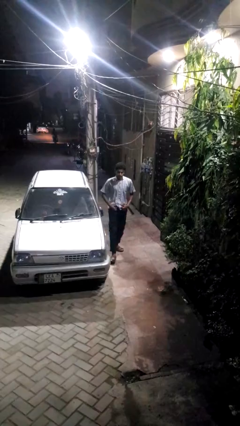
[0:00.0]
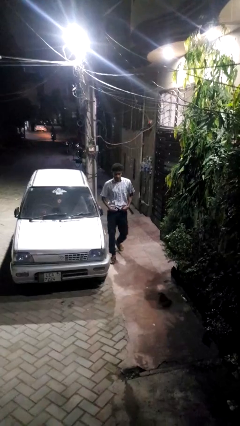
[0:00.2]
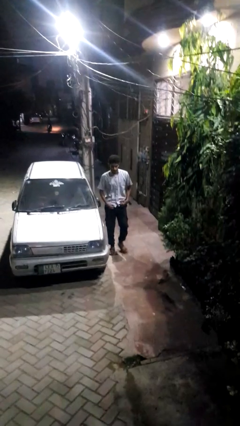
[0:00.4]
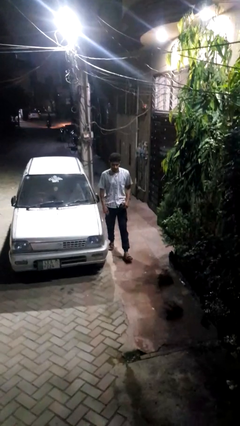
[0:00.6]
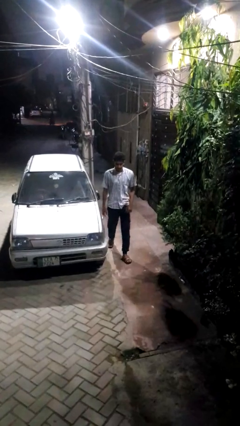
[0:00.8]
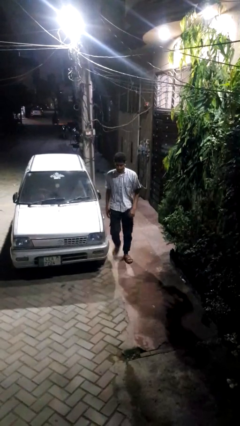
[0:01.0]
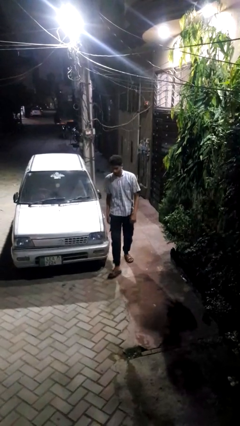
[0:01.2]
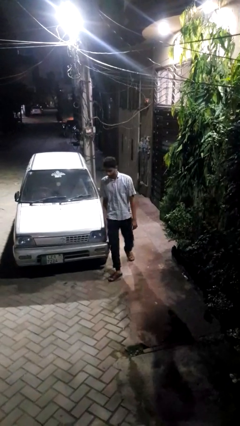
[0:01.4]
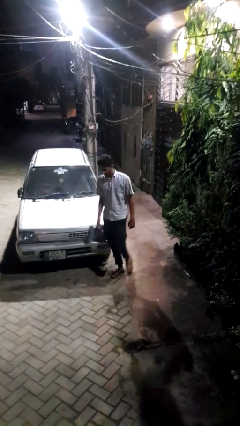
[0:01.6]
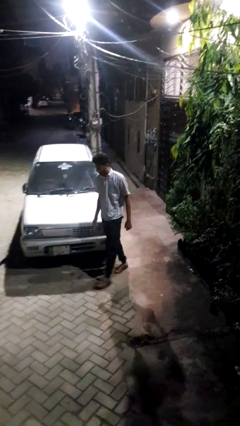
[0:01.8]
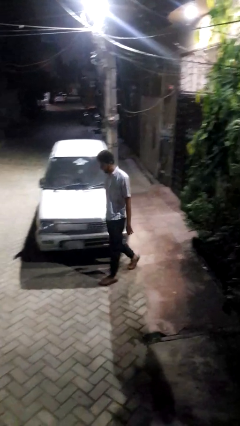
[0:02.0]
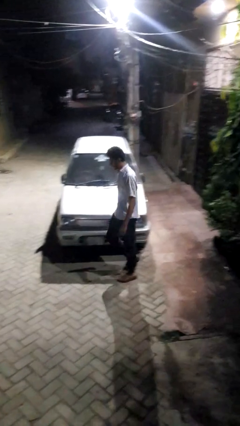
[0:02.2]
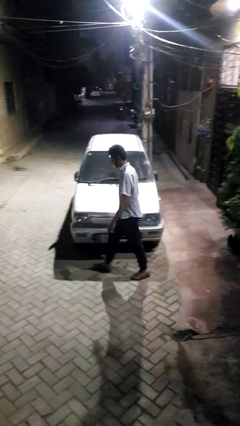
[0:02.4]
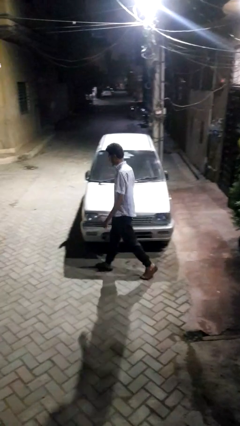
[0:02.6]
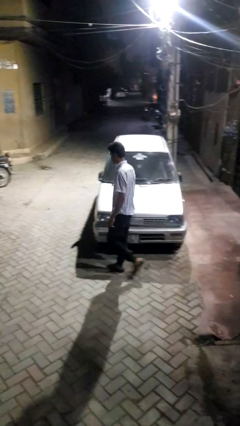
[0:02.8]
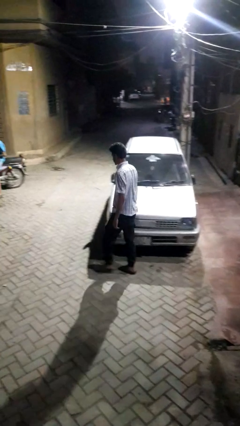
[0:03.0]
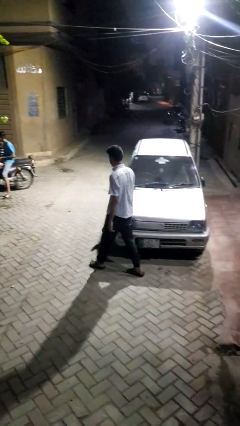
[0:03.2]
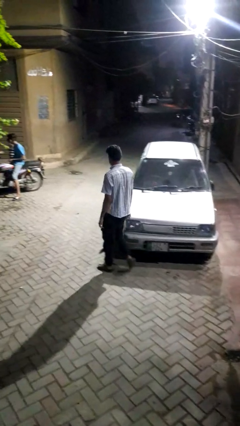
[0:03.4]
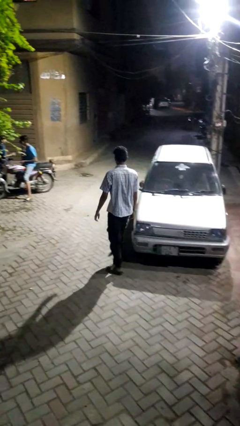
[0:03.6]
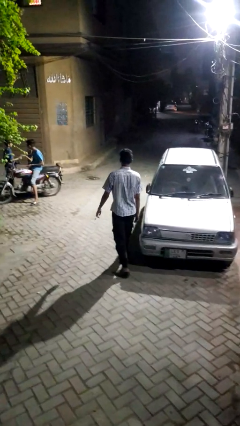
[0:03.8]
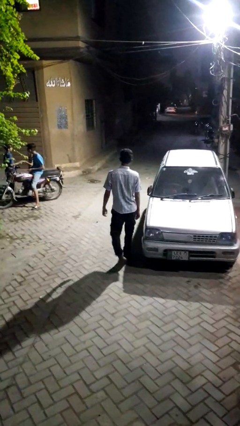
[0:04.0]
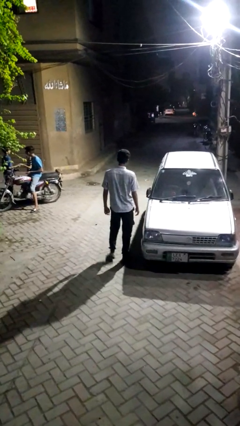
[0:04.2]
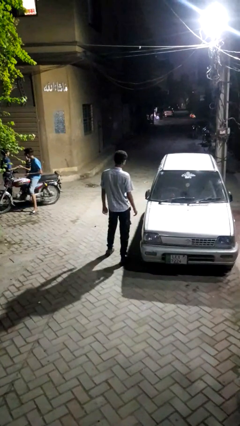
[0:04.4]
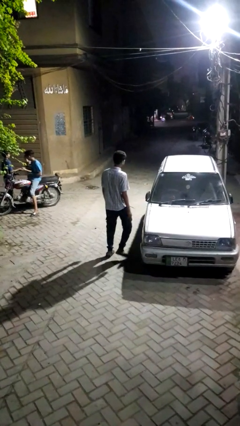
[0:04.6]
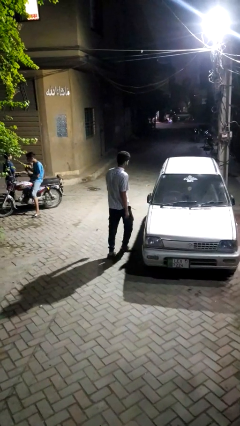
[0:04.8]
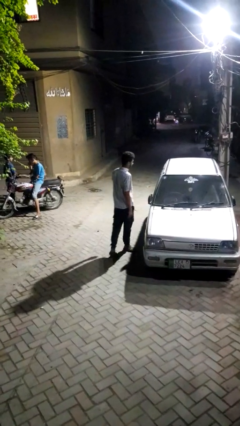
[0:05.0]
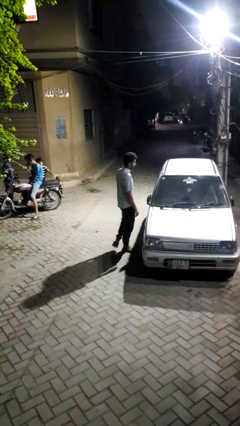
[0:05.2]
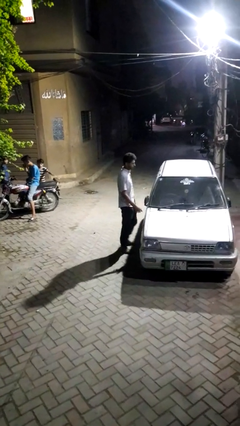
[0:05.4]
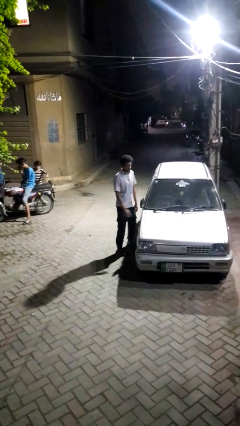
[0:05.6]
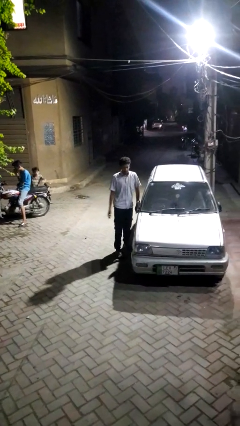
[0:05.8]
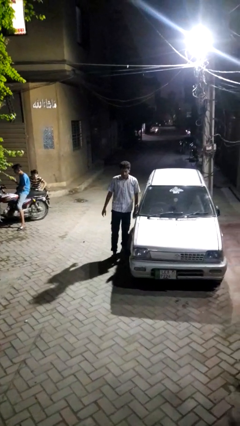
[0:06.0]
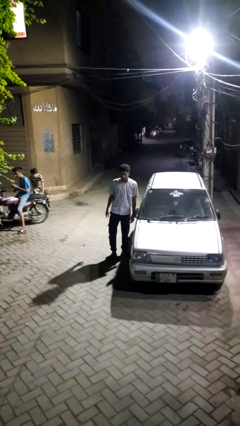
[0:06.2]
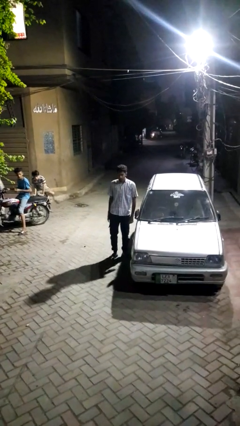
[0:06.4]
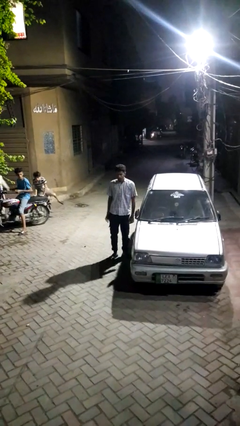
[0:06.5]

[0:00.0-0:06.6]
person walks around car

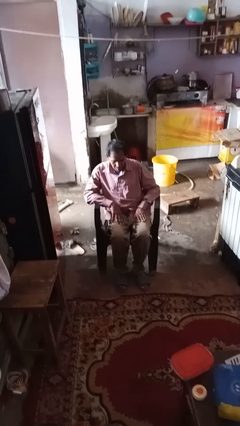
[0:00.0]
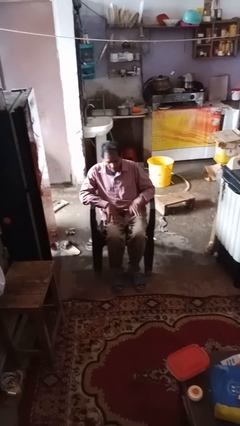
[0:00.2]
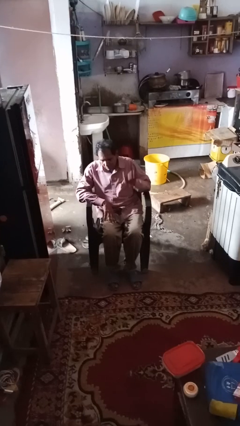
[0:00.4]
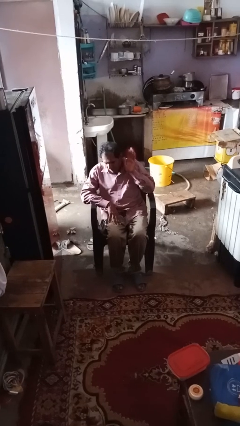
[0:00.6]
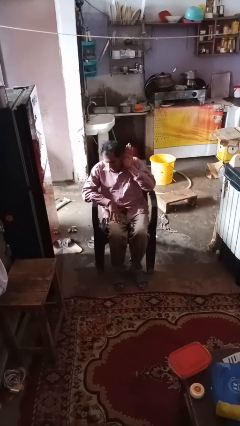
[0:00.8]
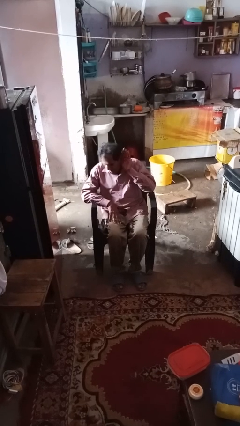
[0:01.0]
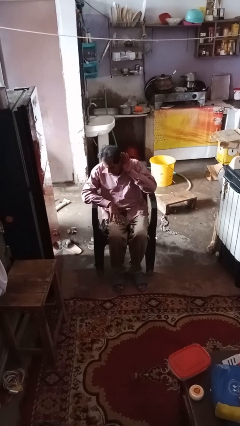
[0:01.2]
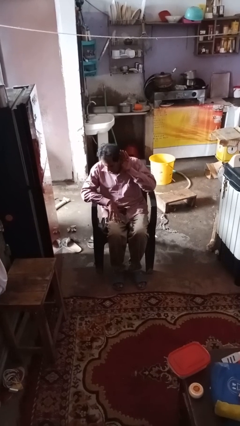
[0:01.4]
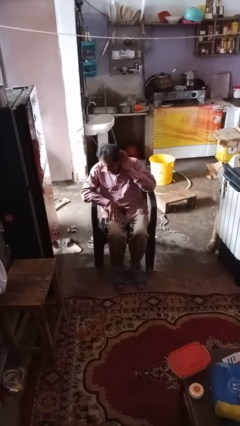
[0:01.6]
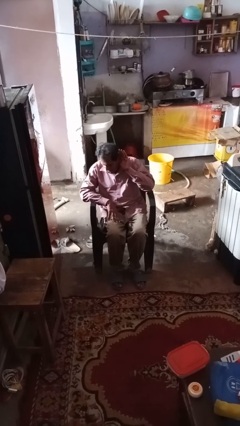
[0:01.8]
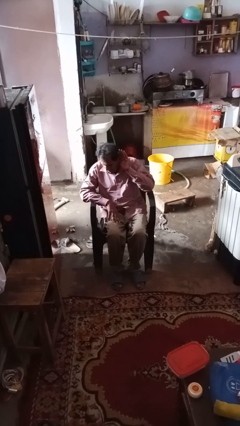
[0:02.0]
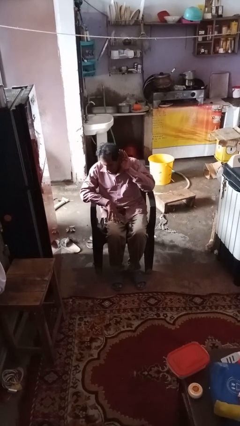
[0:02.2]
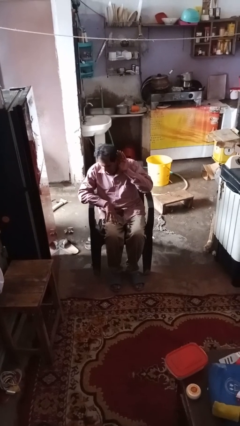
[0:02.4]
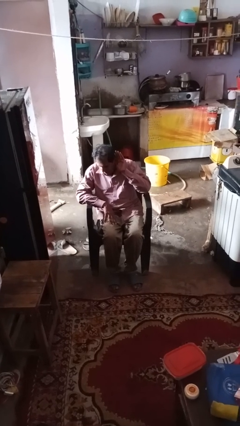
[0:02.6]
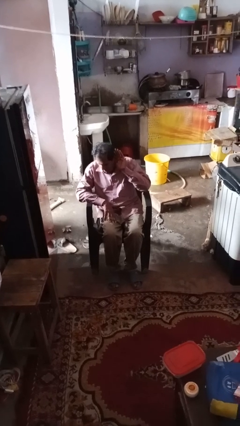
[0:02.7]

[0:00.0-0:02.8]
person gestures listen closely

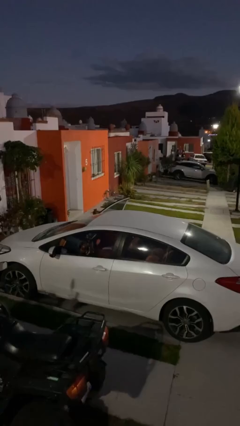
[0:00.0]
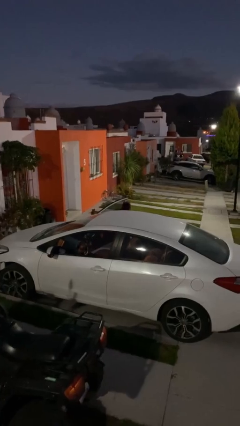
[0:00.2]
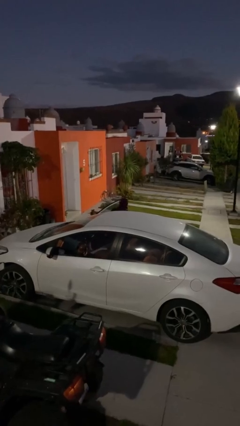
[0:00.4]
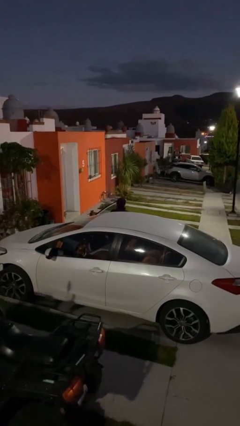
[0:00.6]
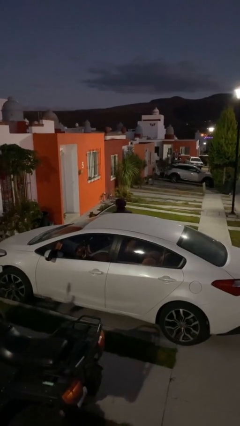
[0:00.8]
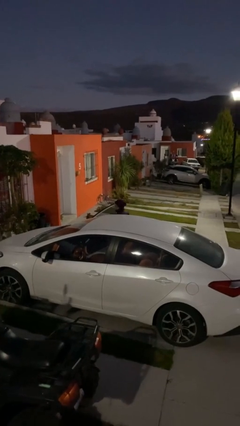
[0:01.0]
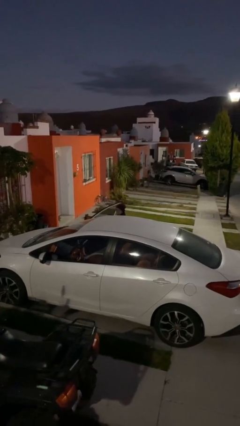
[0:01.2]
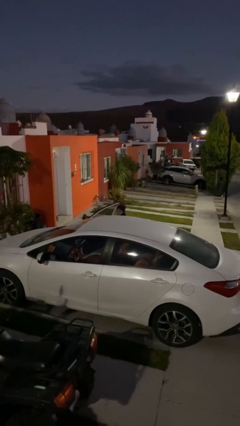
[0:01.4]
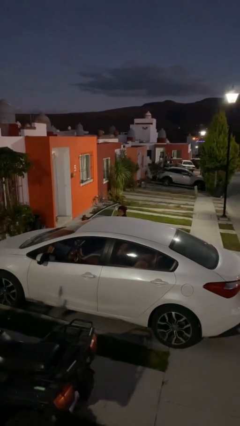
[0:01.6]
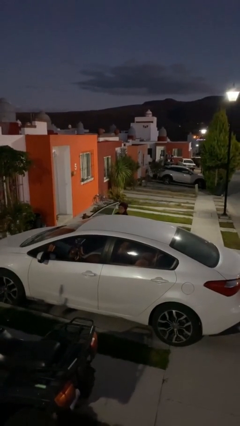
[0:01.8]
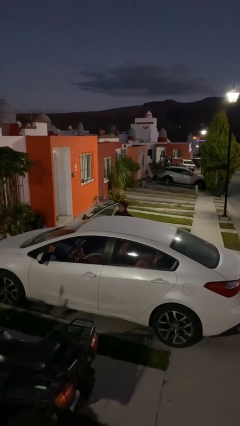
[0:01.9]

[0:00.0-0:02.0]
person exits car

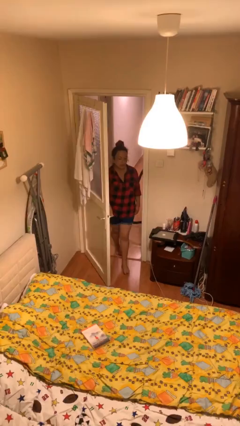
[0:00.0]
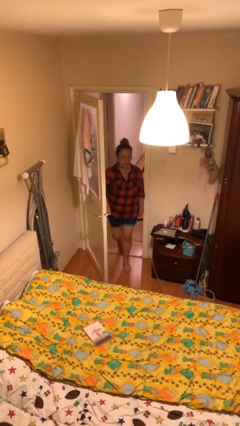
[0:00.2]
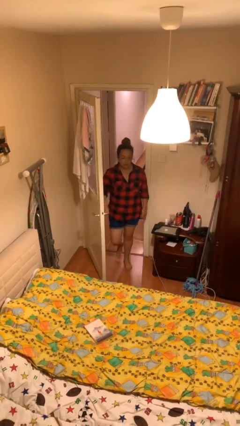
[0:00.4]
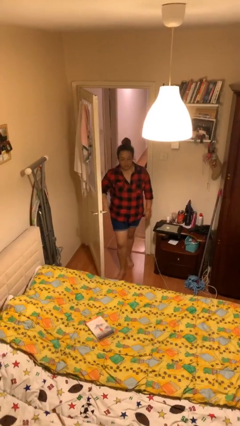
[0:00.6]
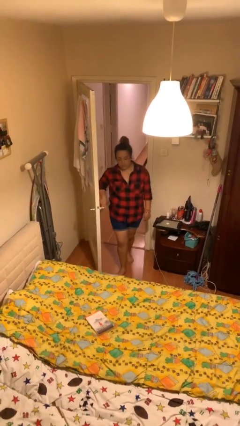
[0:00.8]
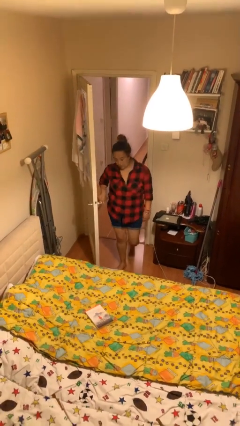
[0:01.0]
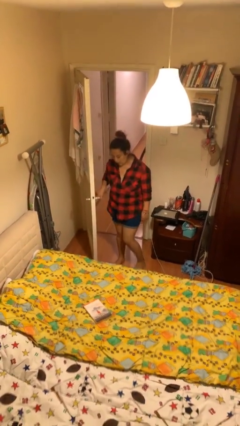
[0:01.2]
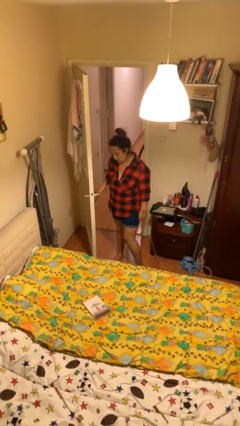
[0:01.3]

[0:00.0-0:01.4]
person enters scene through structure

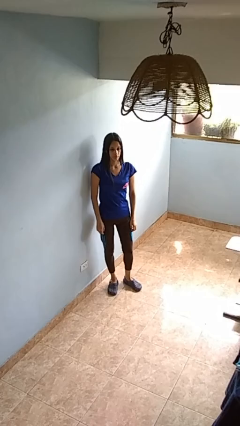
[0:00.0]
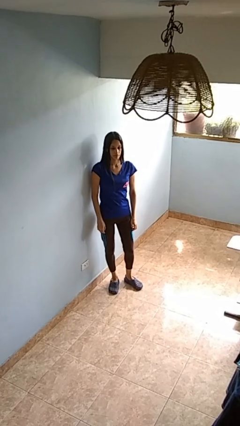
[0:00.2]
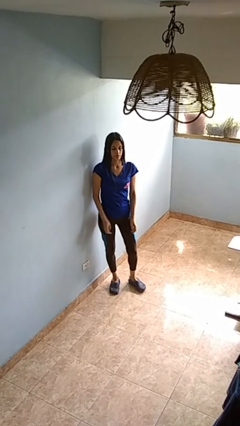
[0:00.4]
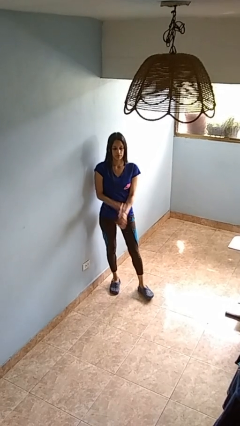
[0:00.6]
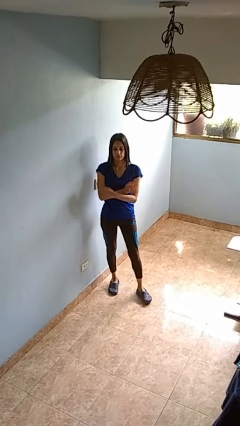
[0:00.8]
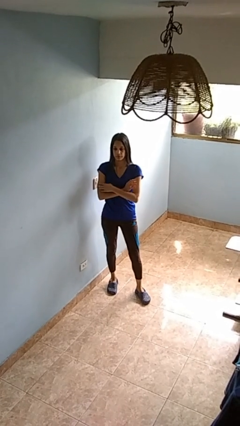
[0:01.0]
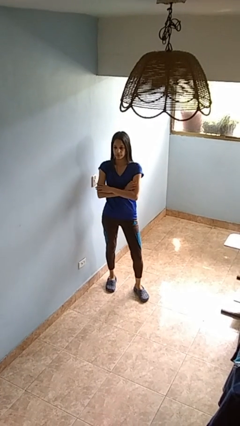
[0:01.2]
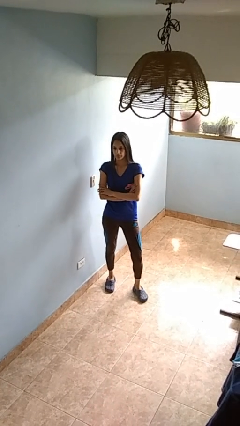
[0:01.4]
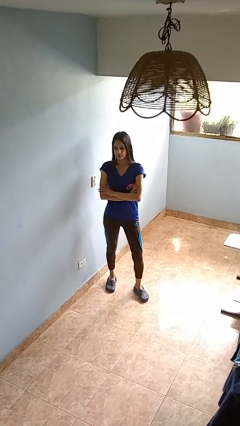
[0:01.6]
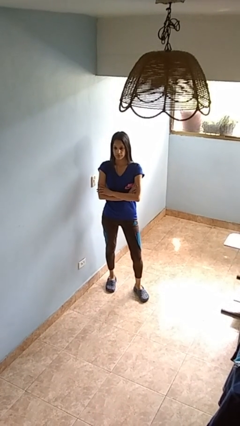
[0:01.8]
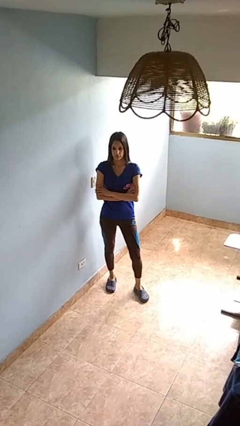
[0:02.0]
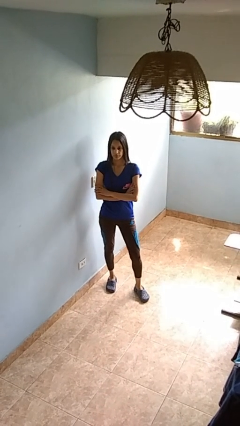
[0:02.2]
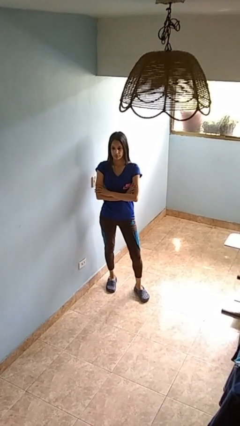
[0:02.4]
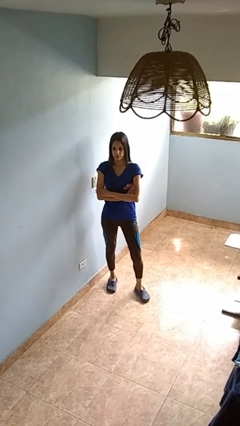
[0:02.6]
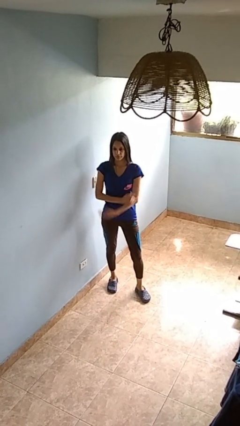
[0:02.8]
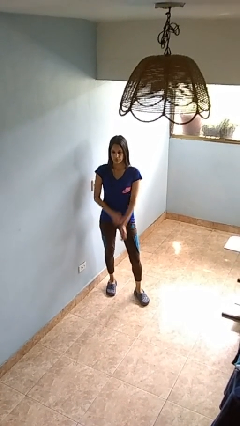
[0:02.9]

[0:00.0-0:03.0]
person crosses arms

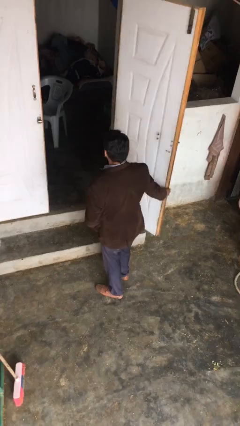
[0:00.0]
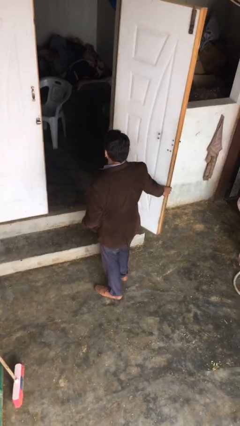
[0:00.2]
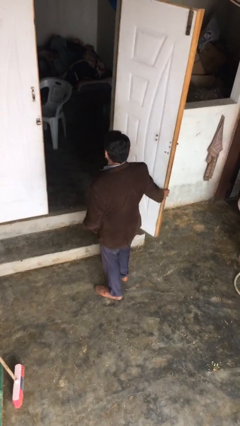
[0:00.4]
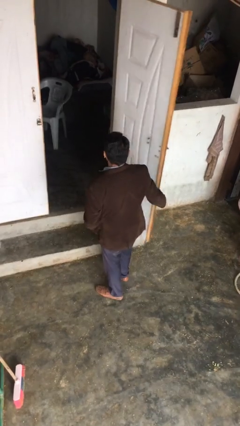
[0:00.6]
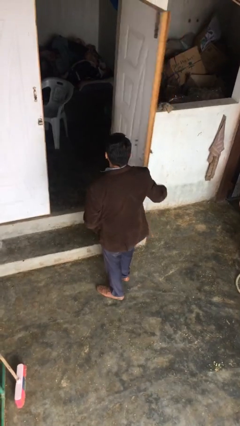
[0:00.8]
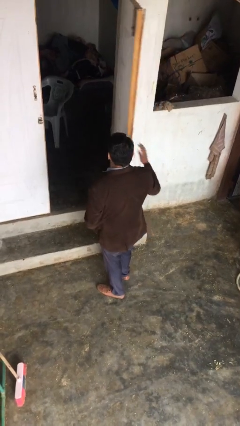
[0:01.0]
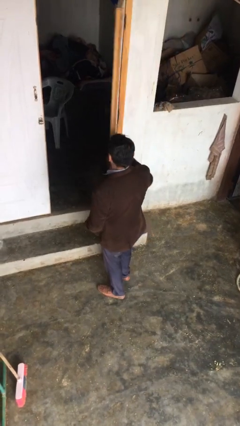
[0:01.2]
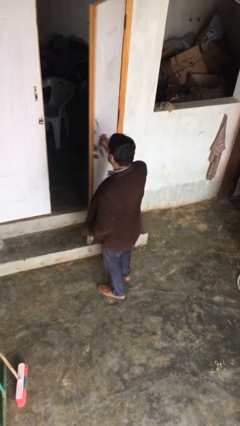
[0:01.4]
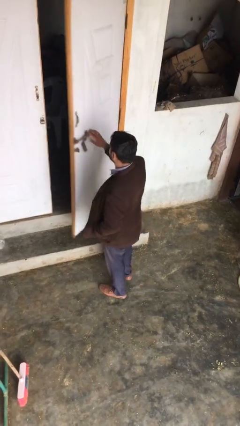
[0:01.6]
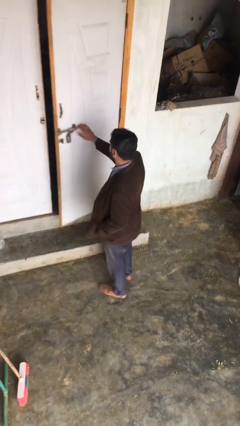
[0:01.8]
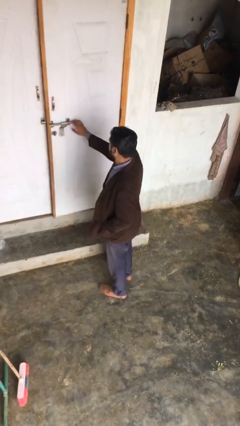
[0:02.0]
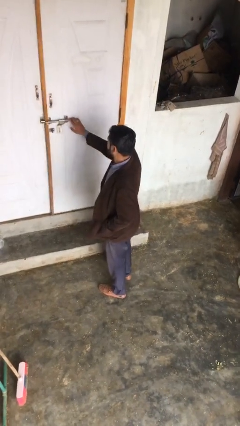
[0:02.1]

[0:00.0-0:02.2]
person closes facility door
